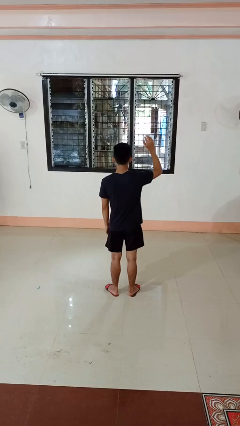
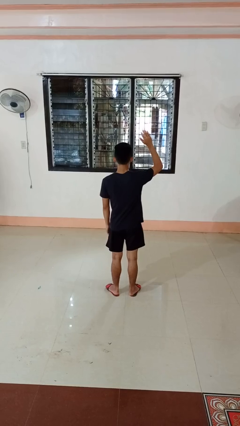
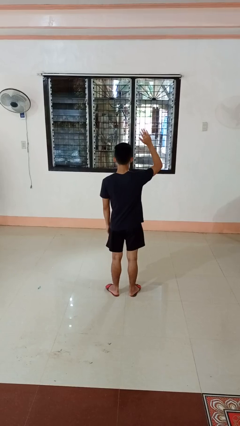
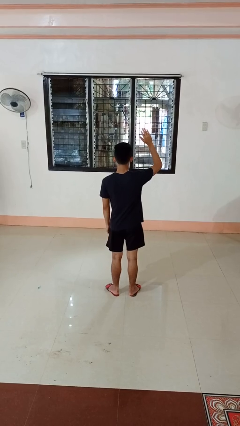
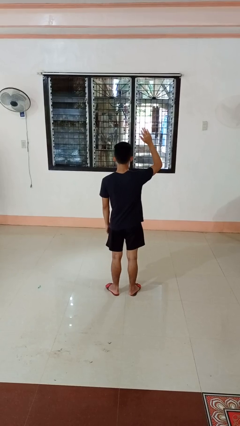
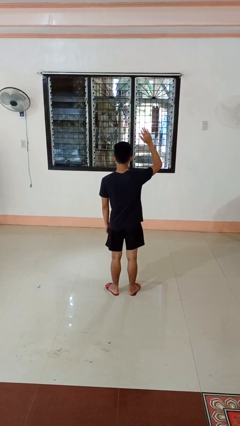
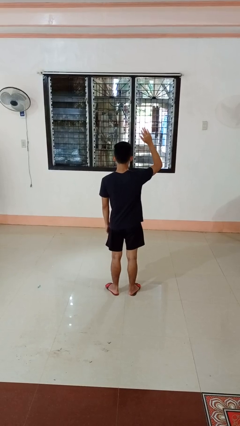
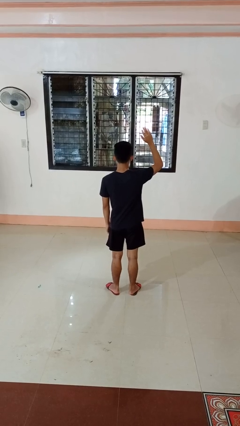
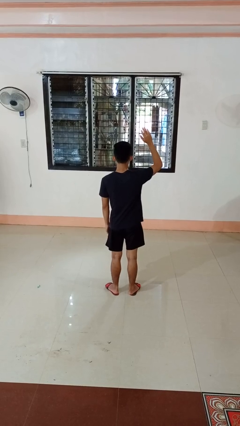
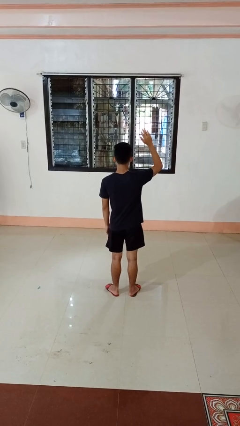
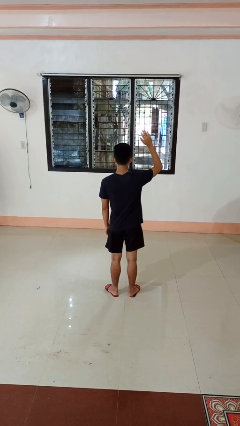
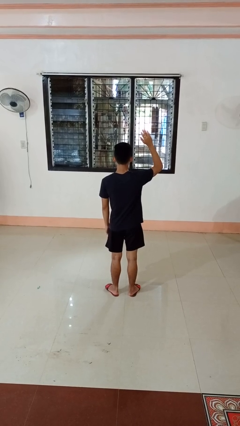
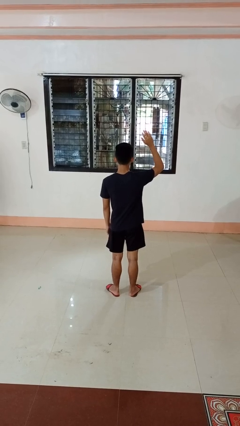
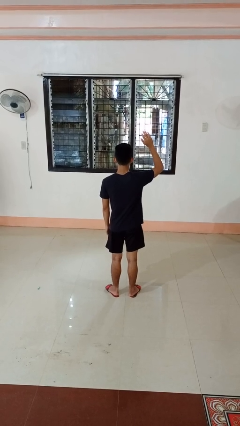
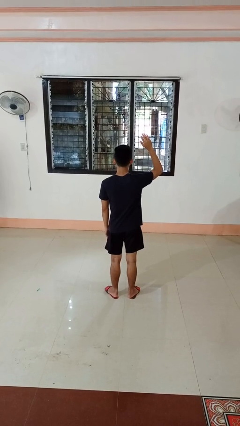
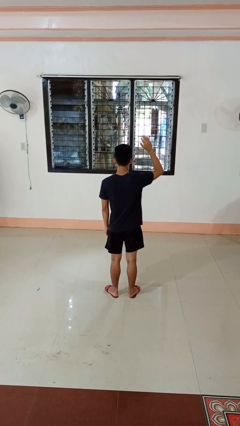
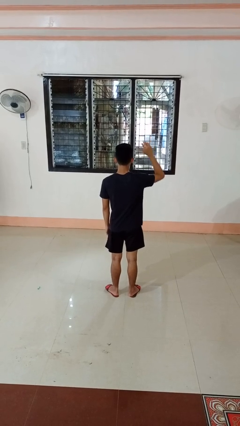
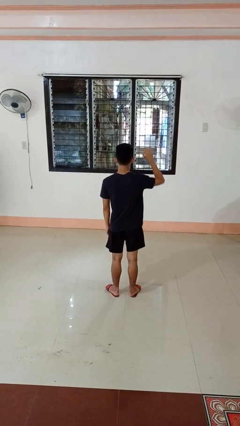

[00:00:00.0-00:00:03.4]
person gestures raise hand

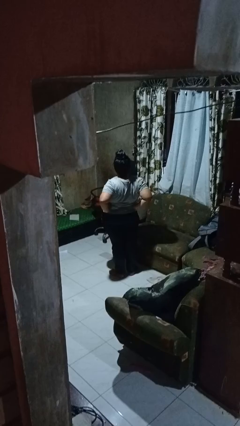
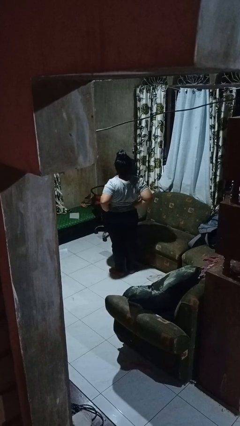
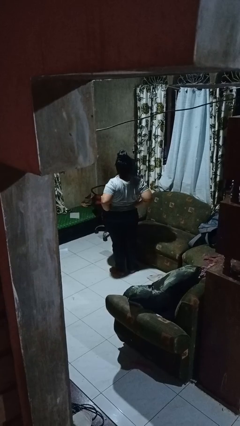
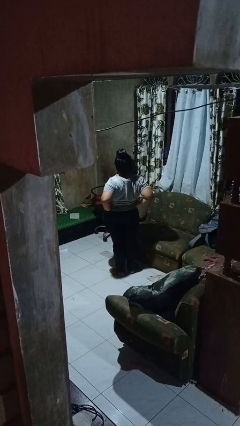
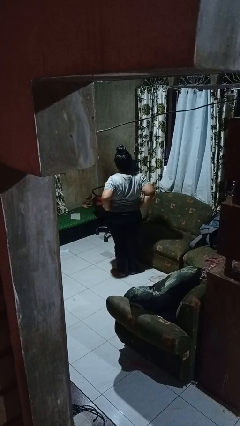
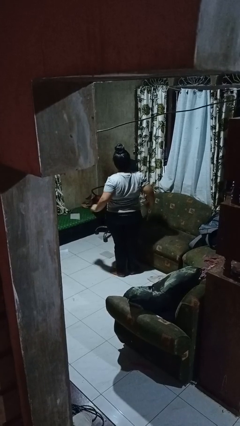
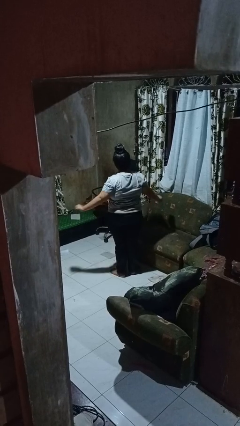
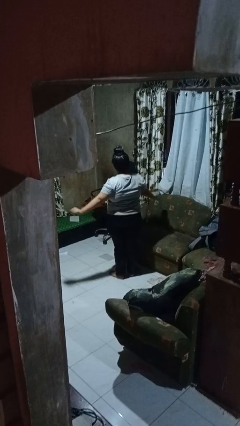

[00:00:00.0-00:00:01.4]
person stretches back

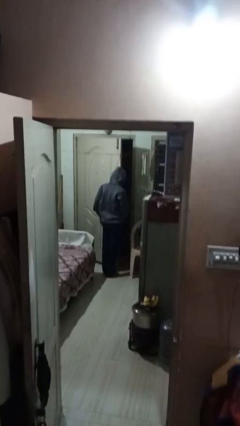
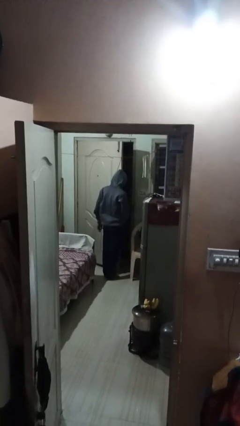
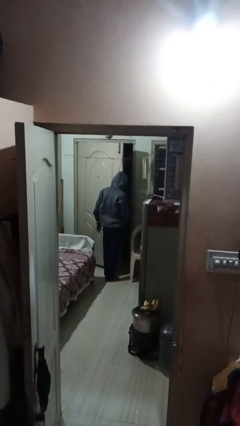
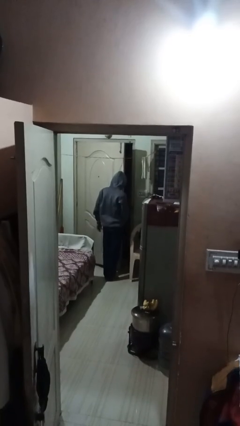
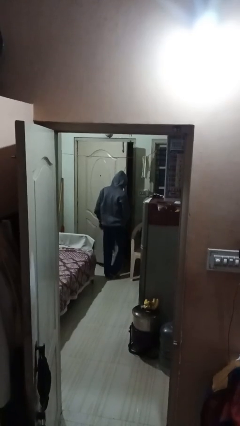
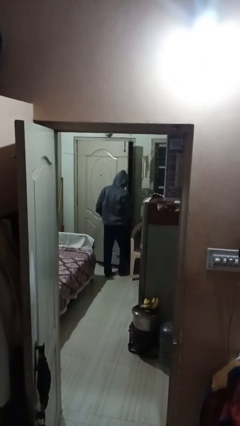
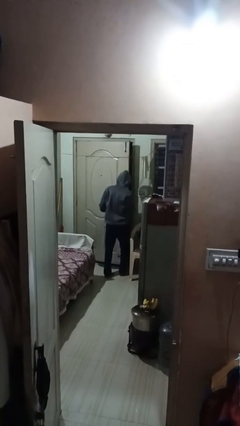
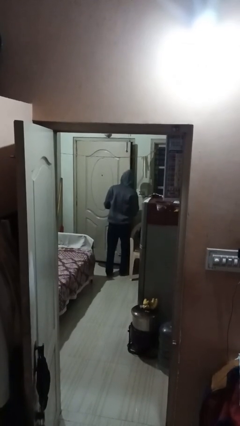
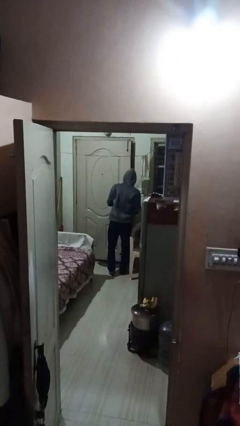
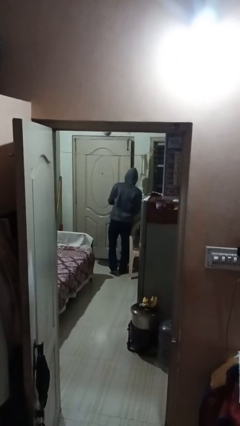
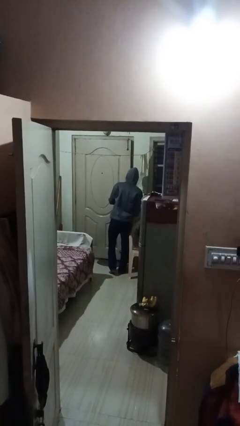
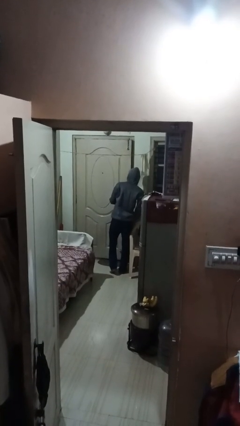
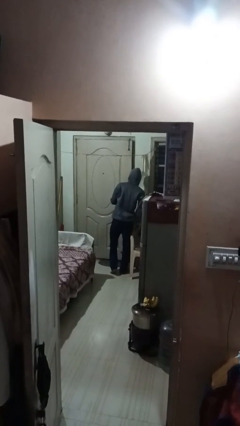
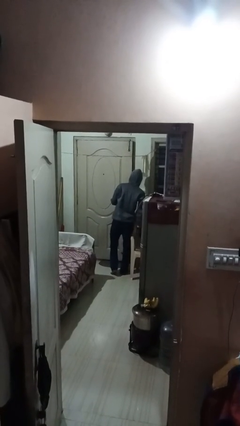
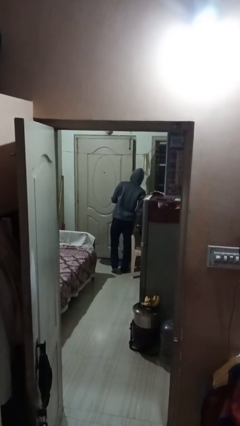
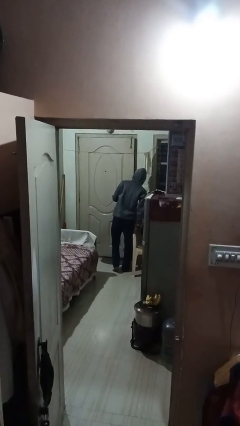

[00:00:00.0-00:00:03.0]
person closes facility door

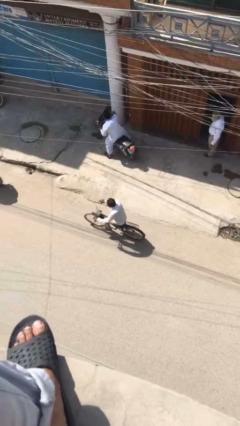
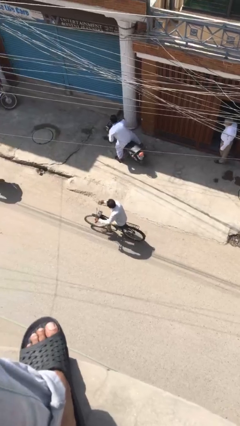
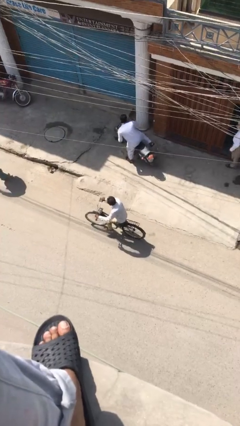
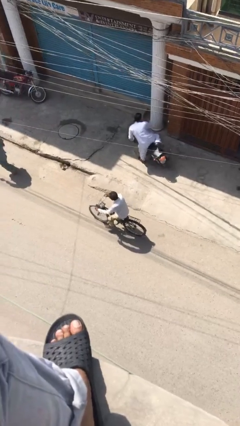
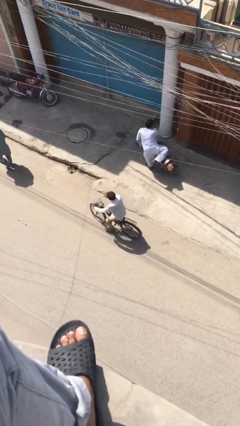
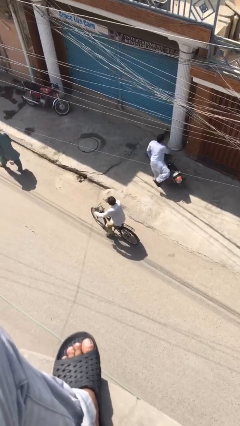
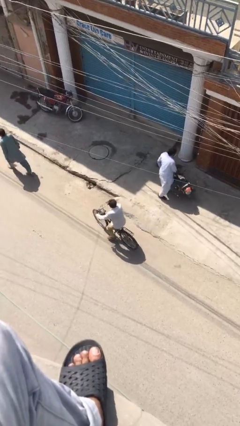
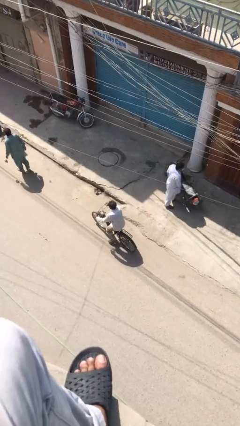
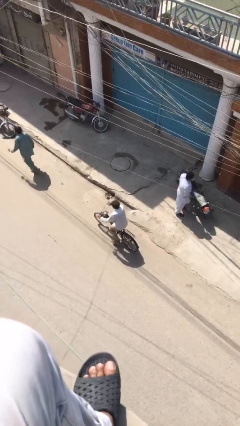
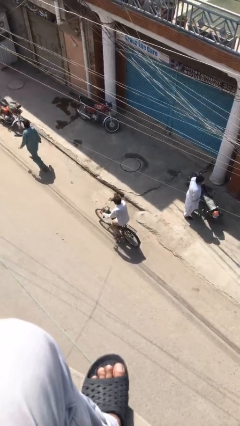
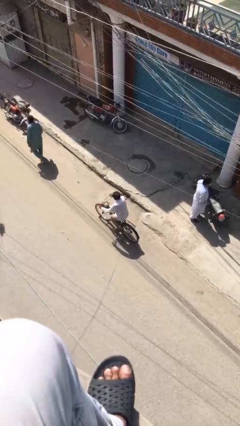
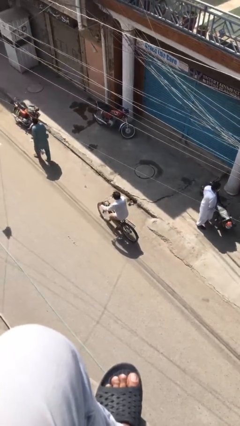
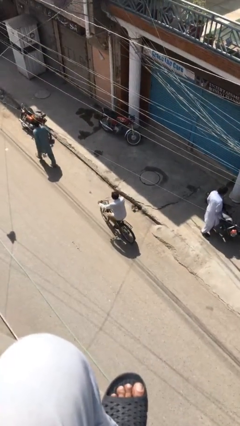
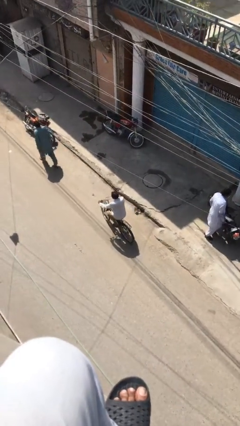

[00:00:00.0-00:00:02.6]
person rides bicycle

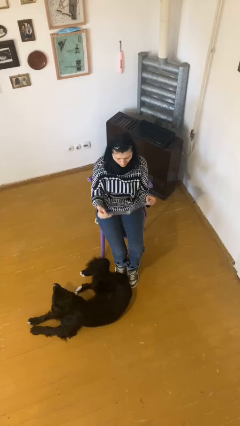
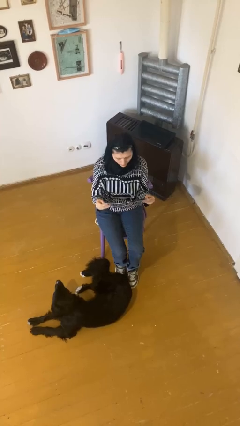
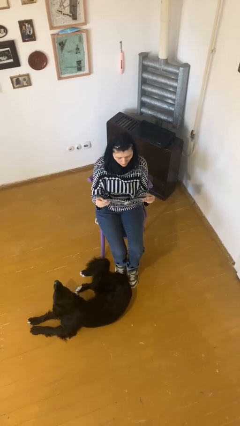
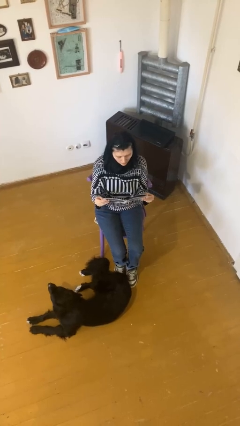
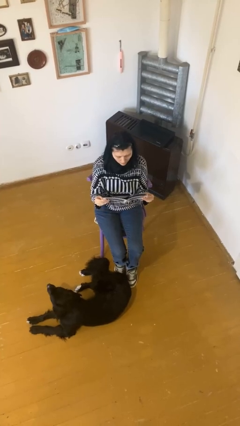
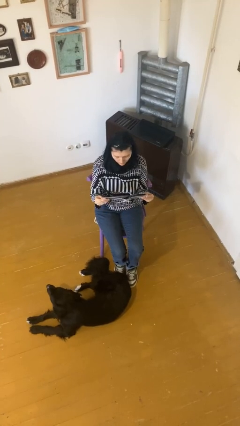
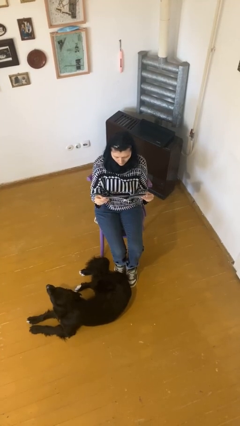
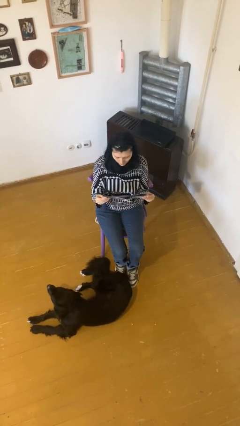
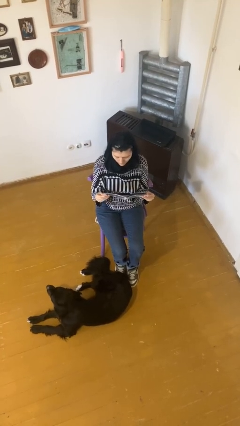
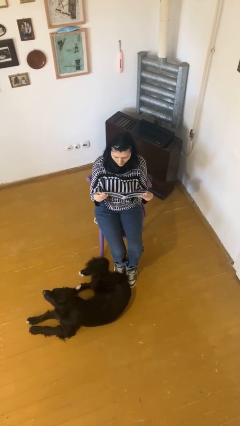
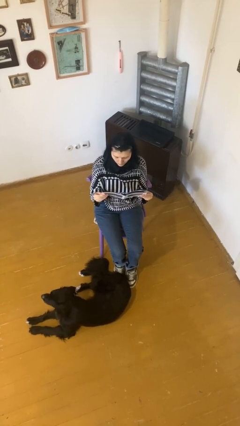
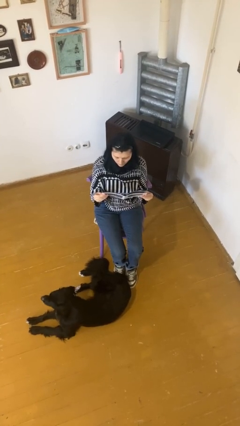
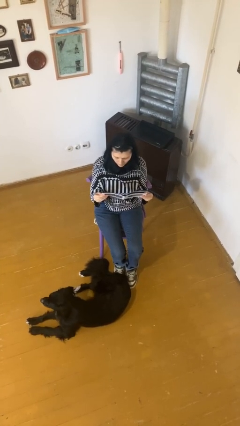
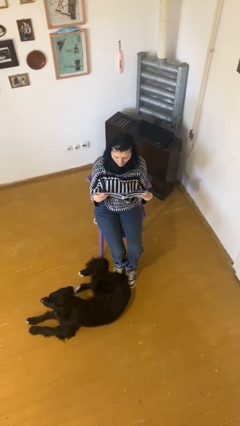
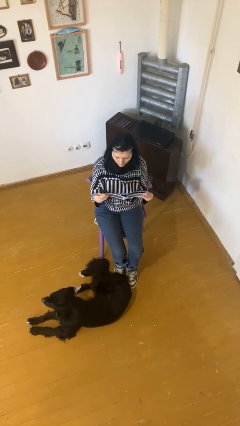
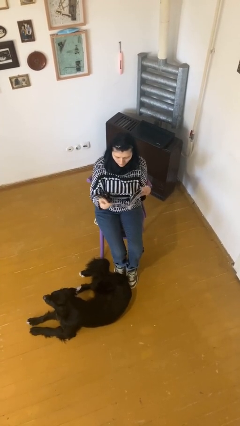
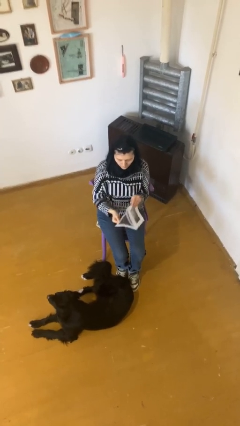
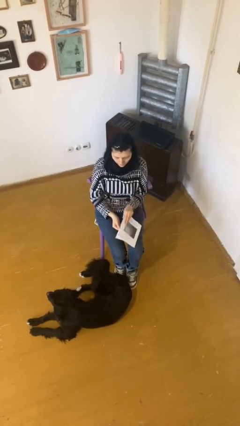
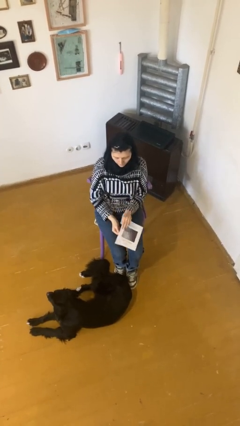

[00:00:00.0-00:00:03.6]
person reads document

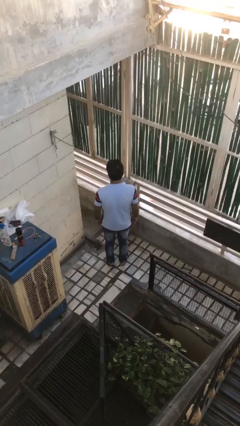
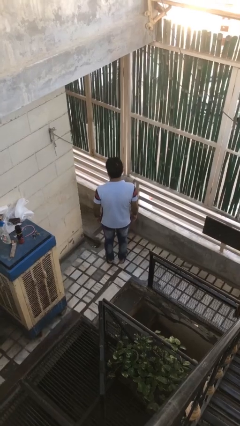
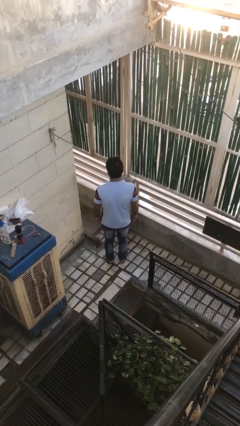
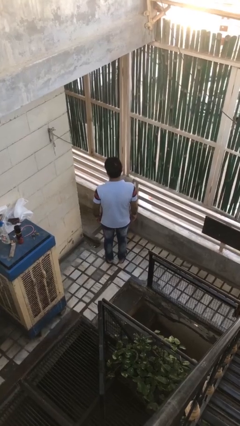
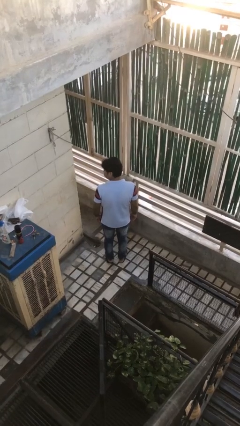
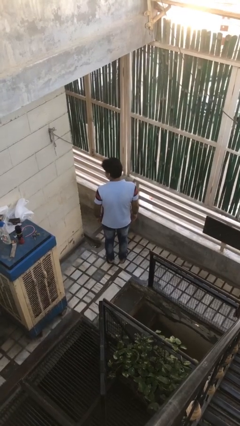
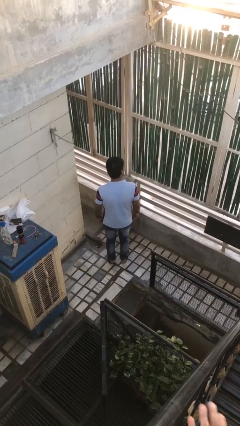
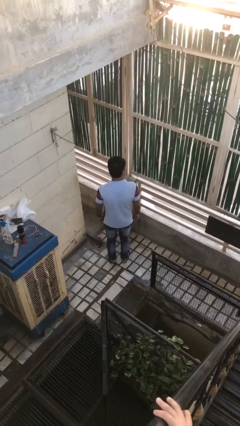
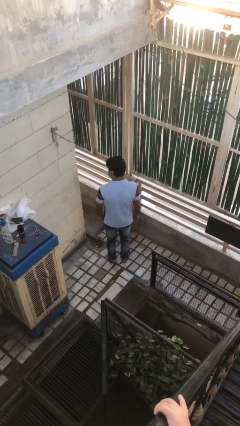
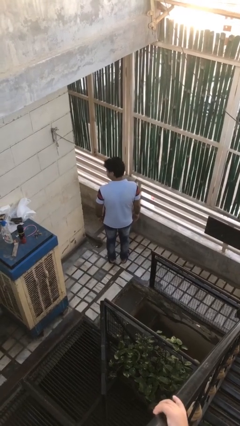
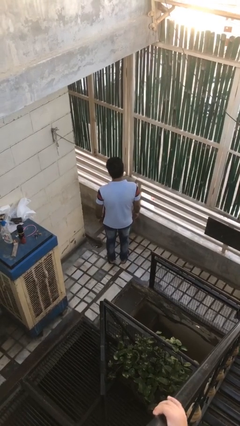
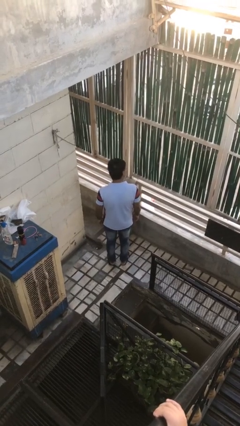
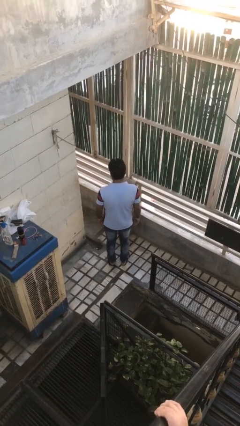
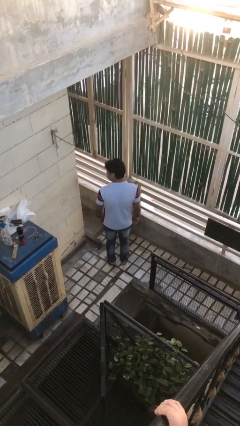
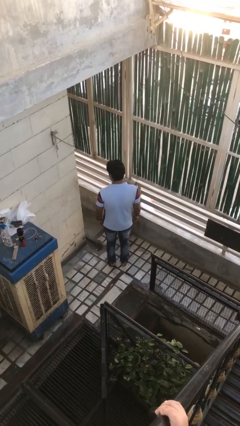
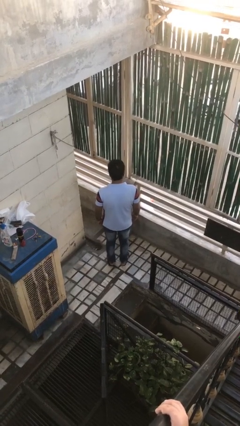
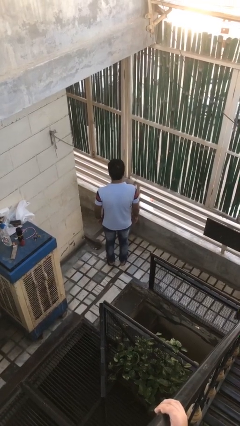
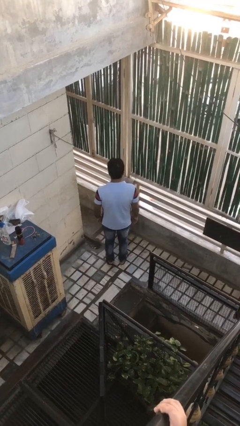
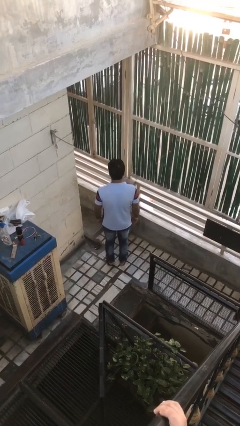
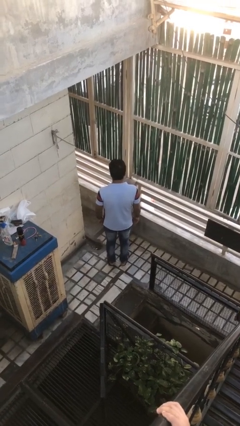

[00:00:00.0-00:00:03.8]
person shakes head
